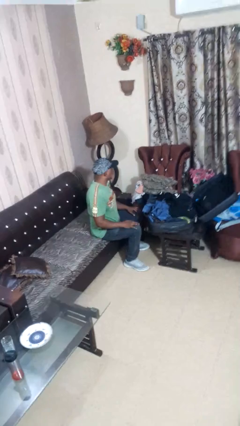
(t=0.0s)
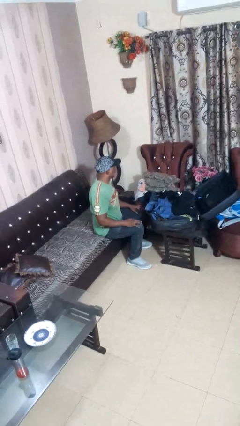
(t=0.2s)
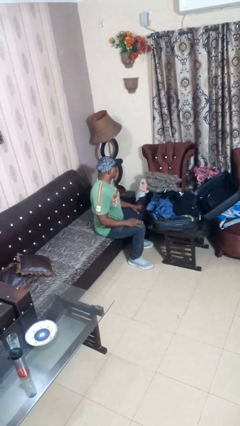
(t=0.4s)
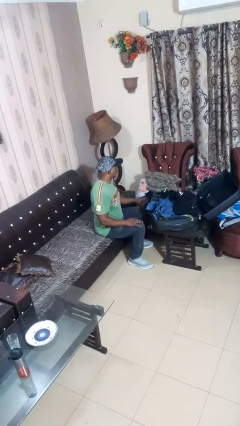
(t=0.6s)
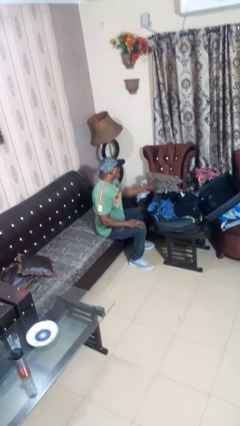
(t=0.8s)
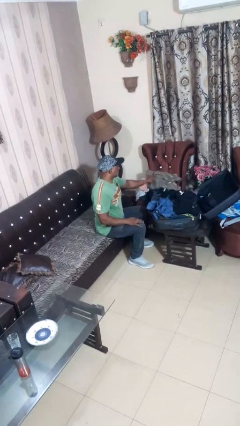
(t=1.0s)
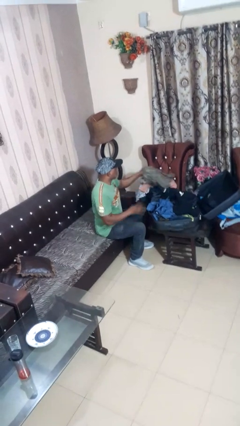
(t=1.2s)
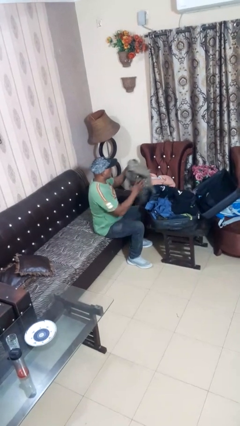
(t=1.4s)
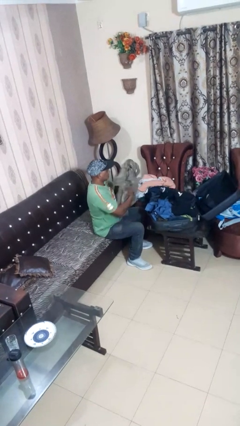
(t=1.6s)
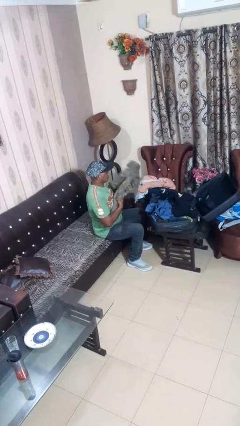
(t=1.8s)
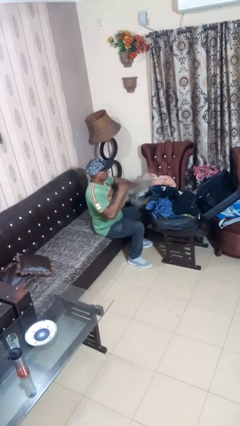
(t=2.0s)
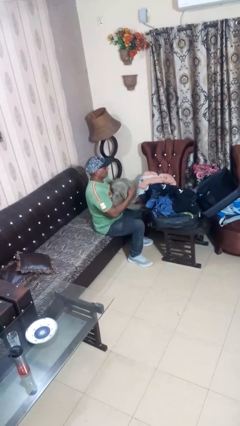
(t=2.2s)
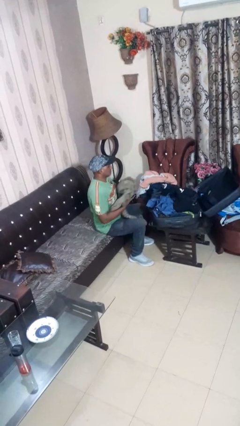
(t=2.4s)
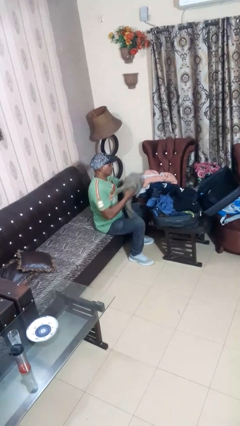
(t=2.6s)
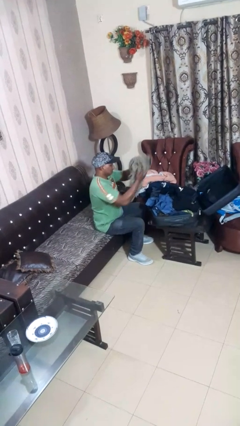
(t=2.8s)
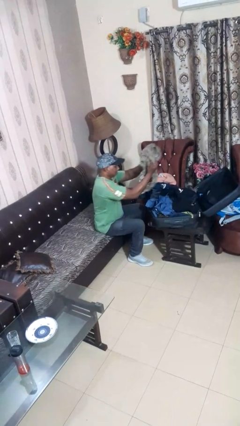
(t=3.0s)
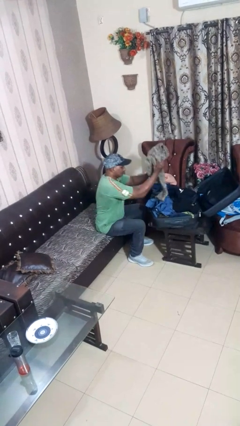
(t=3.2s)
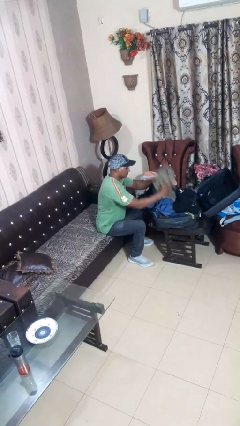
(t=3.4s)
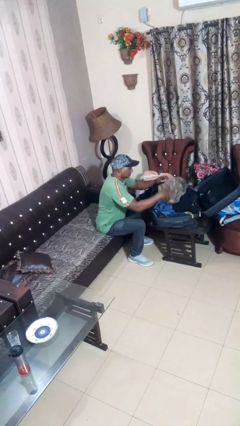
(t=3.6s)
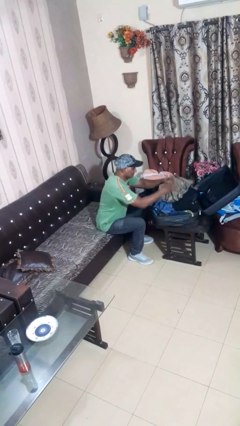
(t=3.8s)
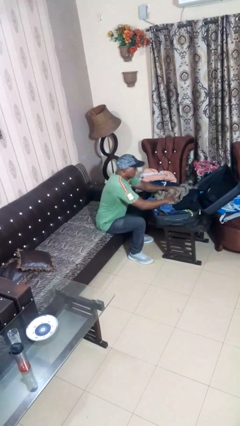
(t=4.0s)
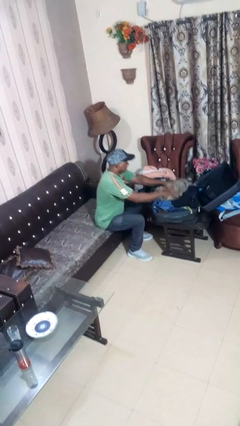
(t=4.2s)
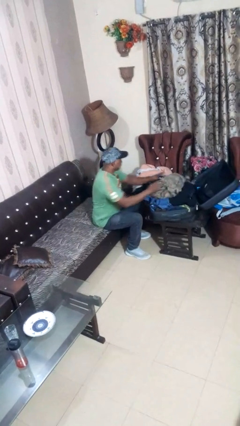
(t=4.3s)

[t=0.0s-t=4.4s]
person loads clothes into suitcase

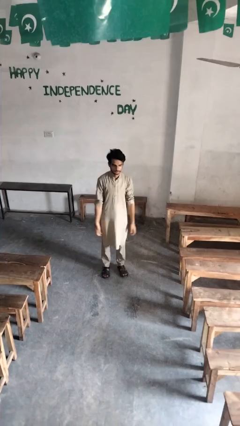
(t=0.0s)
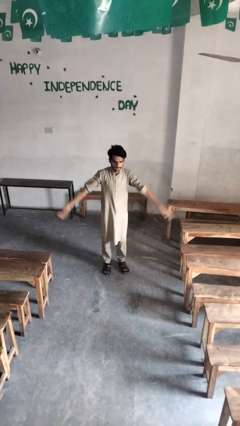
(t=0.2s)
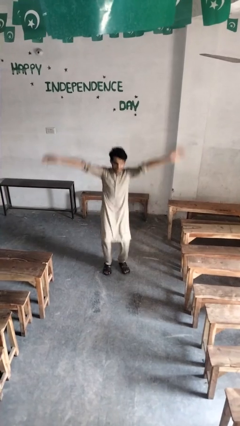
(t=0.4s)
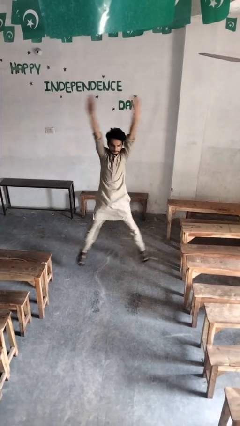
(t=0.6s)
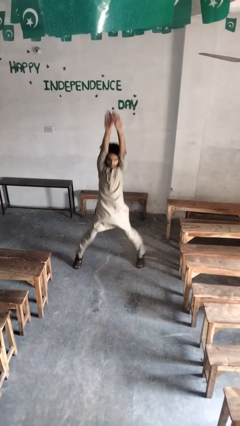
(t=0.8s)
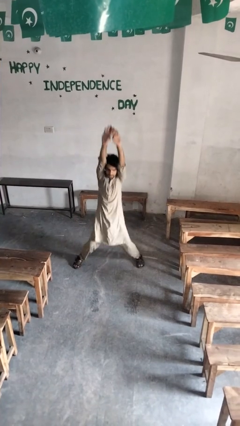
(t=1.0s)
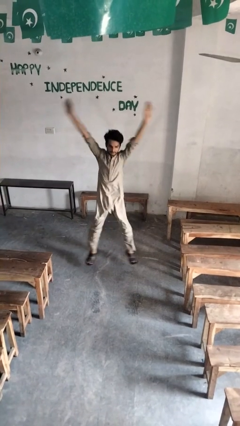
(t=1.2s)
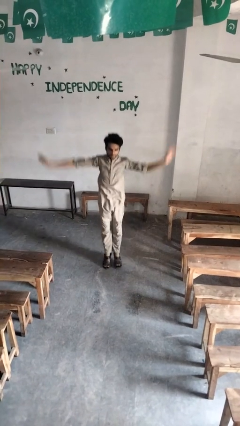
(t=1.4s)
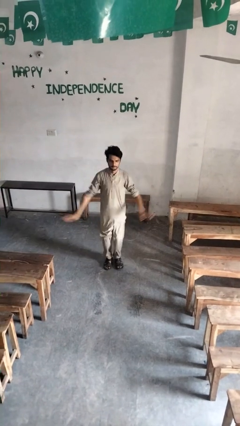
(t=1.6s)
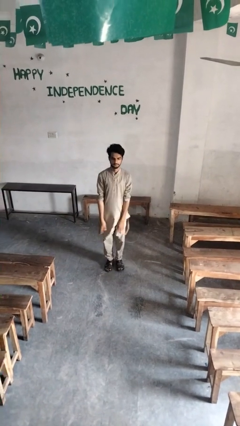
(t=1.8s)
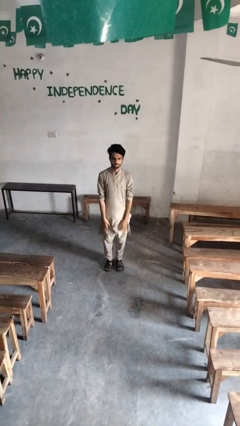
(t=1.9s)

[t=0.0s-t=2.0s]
person exercises with jumping jacks

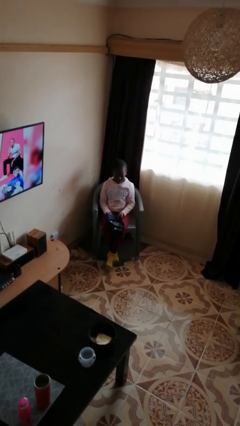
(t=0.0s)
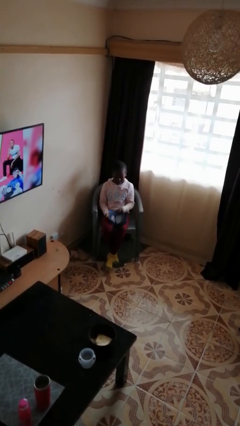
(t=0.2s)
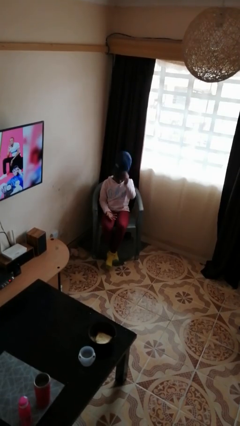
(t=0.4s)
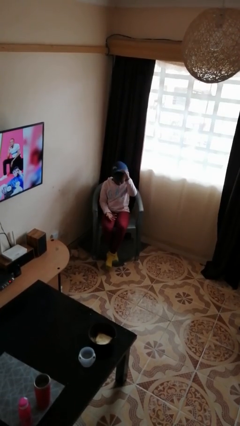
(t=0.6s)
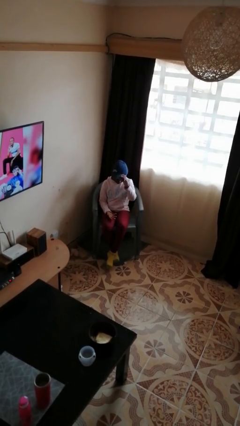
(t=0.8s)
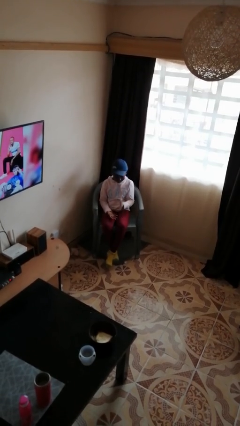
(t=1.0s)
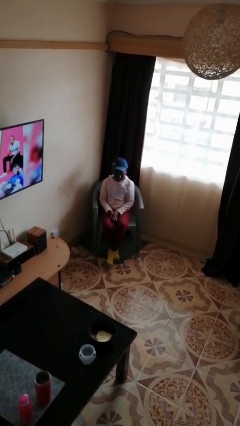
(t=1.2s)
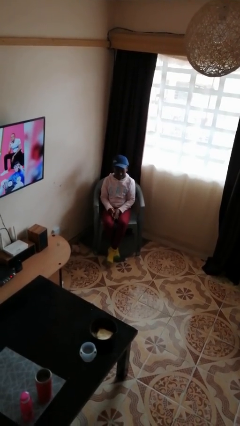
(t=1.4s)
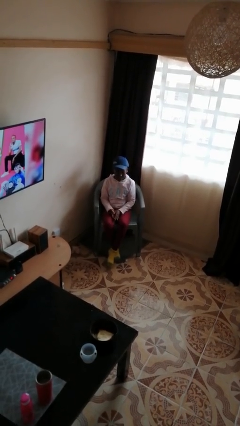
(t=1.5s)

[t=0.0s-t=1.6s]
person puts on hat

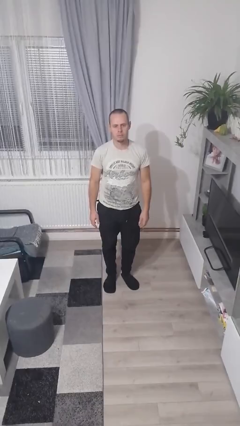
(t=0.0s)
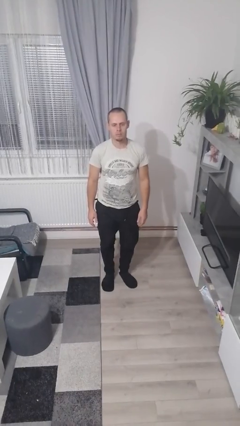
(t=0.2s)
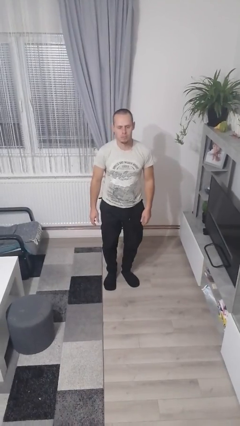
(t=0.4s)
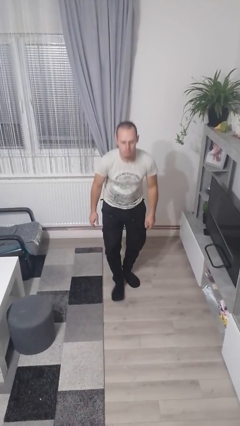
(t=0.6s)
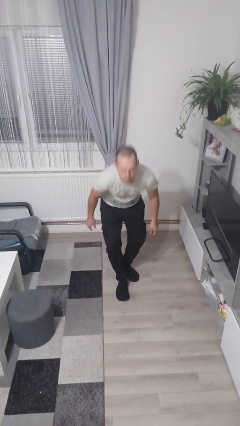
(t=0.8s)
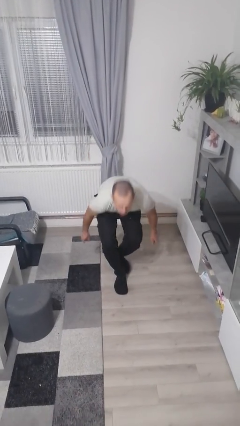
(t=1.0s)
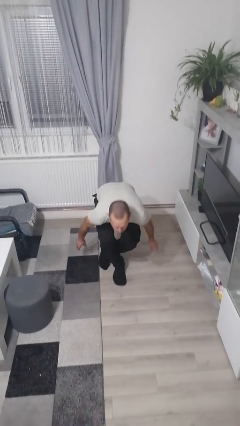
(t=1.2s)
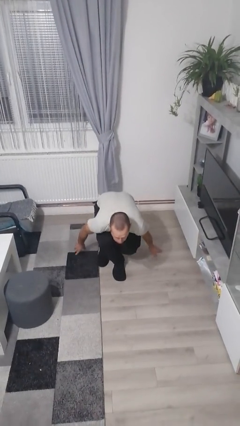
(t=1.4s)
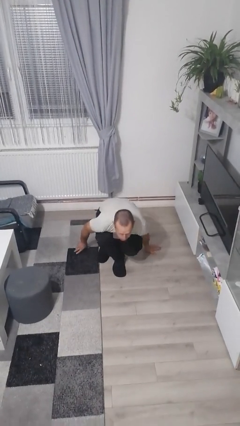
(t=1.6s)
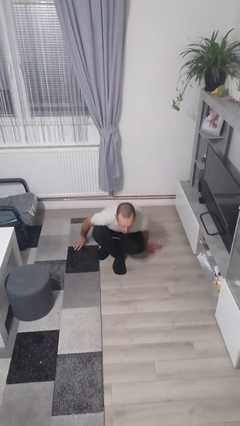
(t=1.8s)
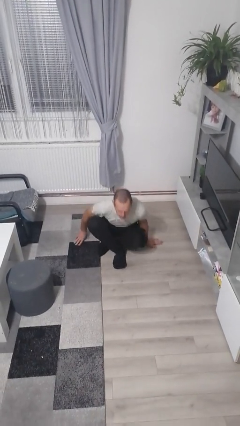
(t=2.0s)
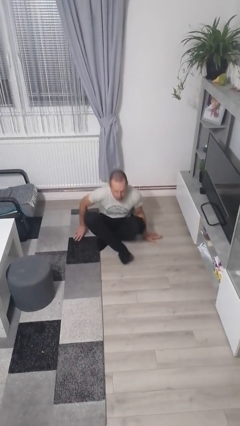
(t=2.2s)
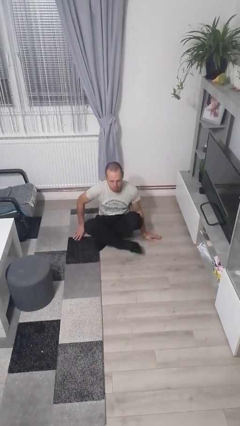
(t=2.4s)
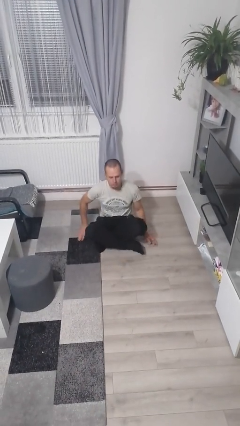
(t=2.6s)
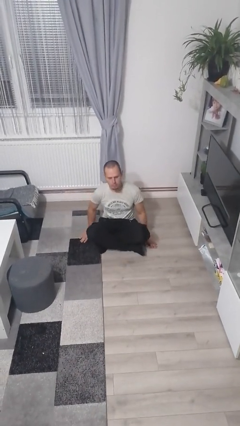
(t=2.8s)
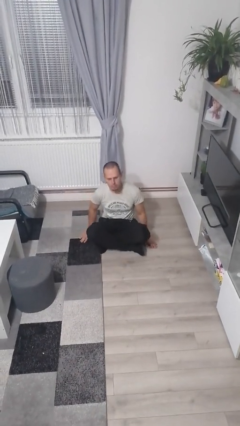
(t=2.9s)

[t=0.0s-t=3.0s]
person sits crisscross

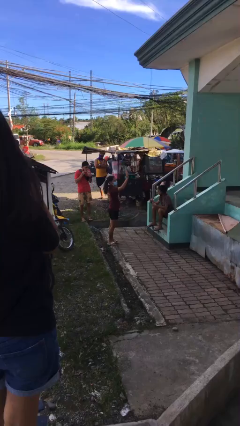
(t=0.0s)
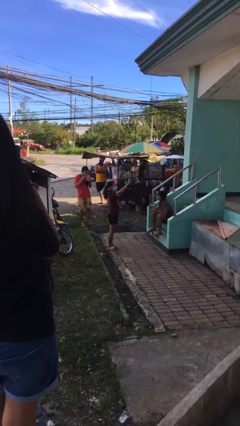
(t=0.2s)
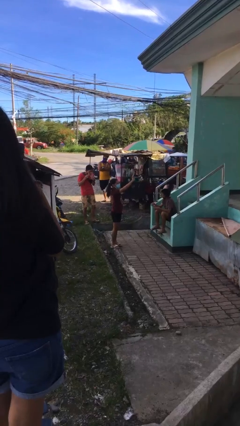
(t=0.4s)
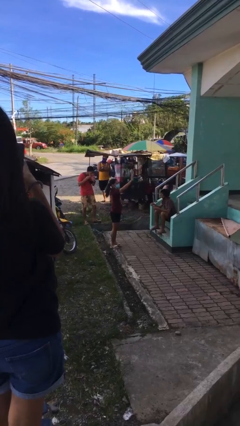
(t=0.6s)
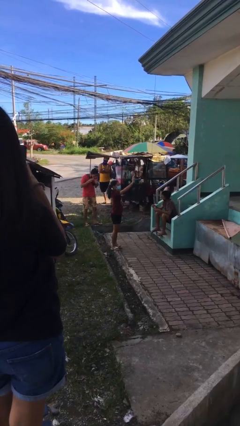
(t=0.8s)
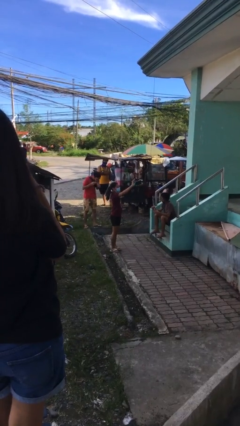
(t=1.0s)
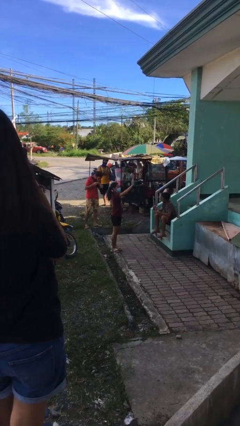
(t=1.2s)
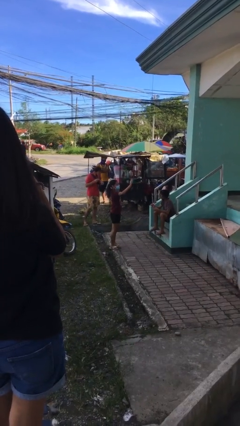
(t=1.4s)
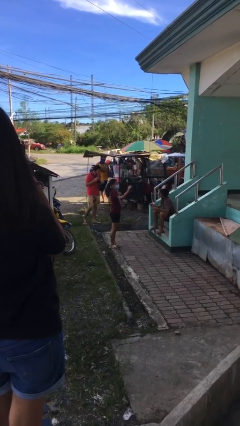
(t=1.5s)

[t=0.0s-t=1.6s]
person waves at person

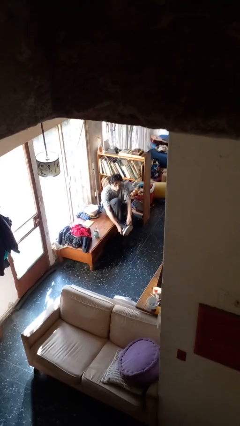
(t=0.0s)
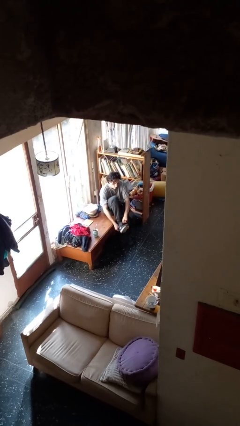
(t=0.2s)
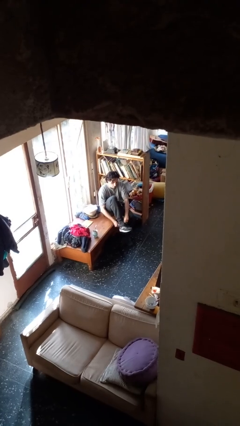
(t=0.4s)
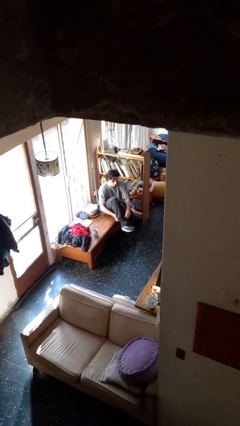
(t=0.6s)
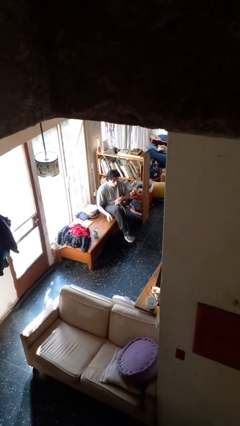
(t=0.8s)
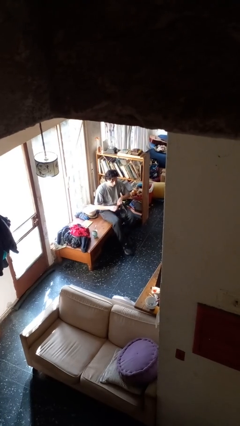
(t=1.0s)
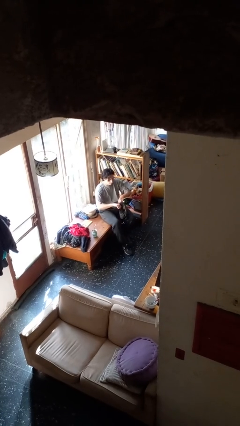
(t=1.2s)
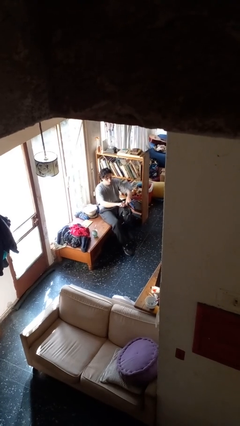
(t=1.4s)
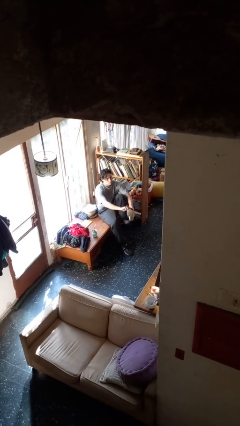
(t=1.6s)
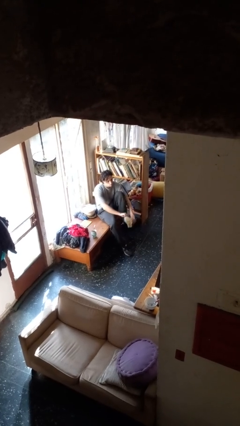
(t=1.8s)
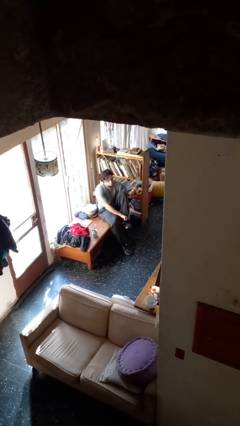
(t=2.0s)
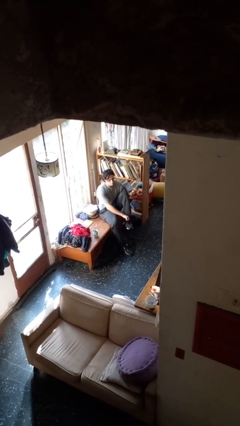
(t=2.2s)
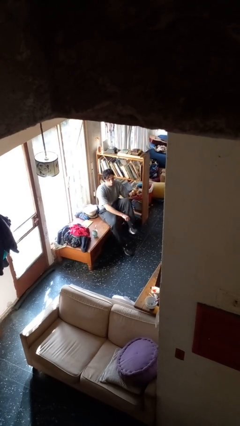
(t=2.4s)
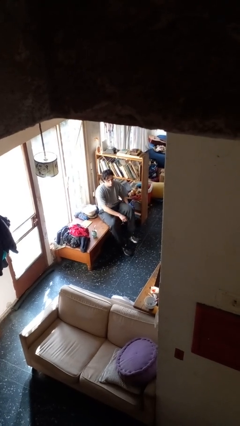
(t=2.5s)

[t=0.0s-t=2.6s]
person puts on shoes

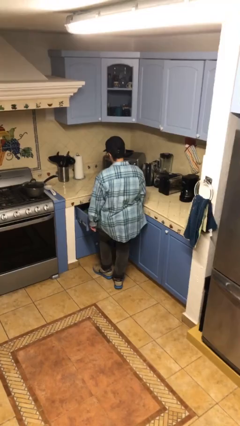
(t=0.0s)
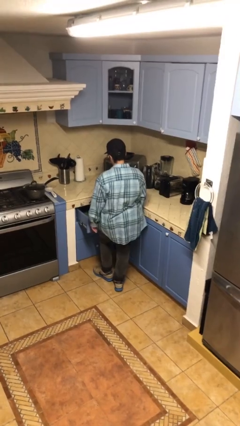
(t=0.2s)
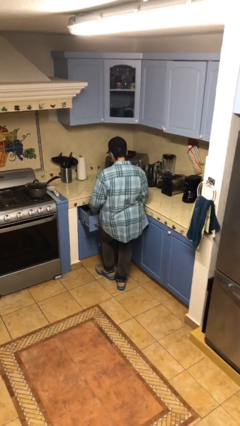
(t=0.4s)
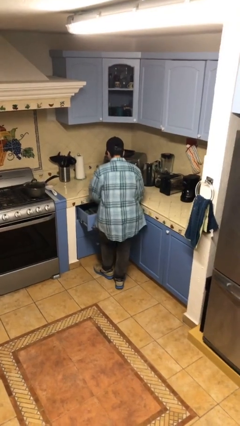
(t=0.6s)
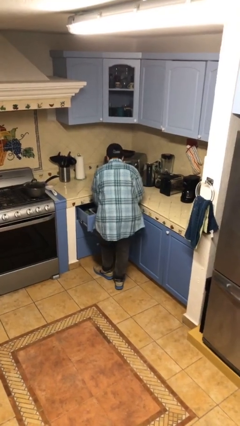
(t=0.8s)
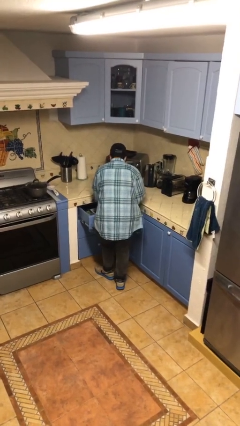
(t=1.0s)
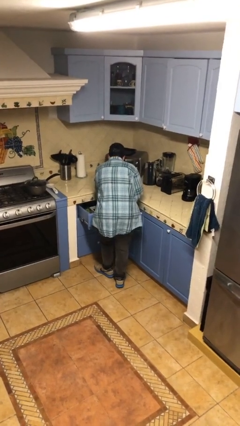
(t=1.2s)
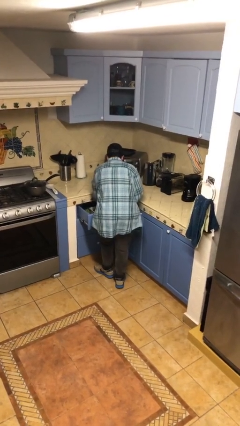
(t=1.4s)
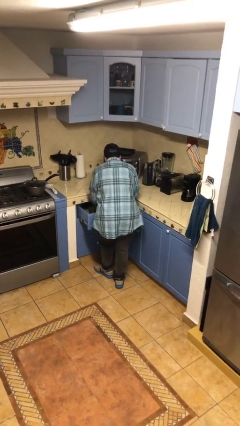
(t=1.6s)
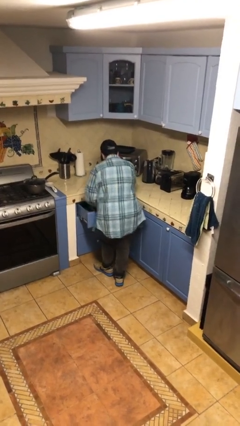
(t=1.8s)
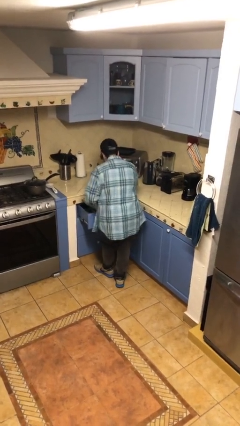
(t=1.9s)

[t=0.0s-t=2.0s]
person searches in kitchen drawer
